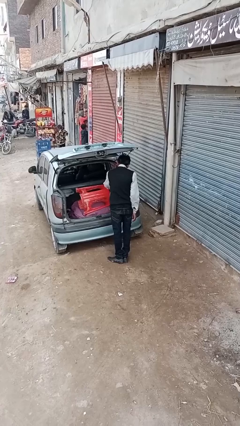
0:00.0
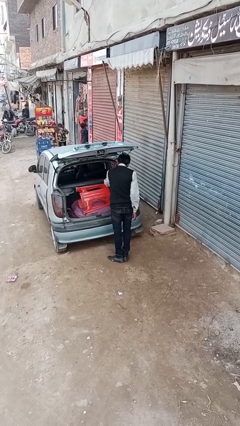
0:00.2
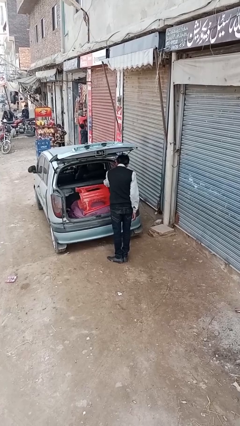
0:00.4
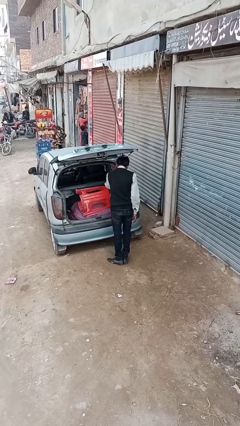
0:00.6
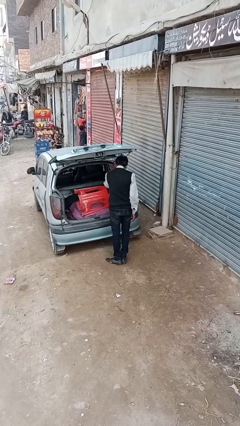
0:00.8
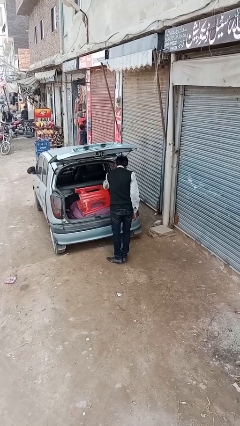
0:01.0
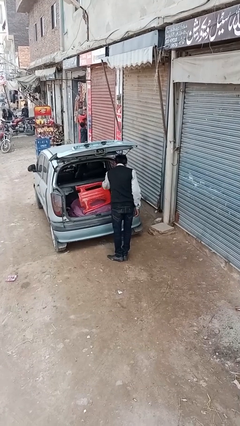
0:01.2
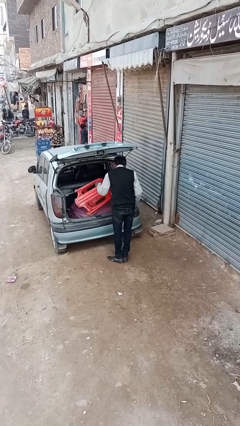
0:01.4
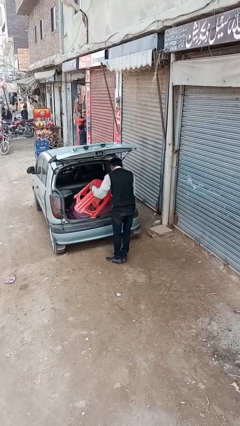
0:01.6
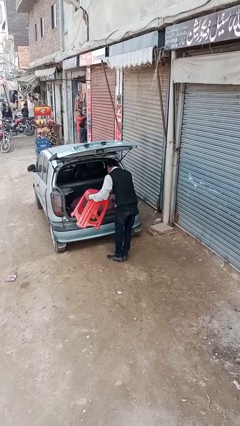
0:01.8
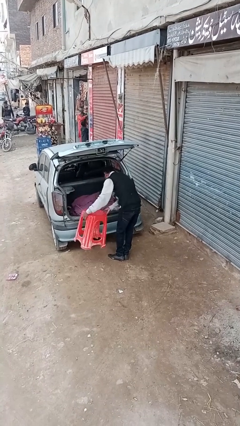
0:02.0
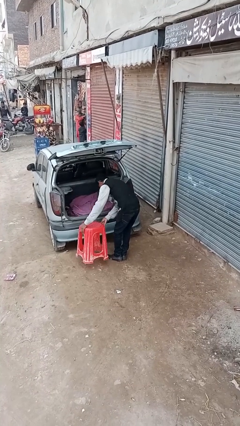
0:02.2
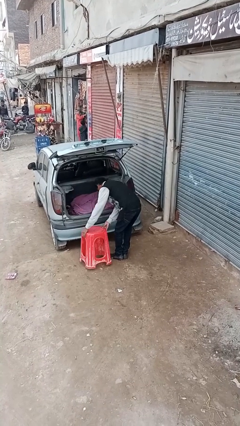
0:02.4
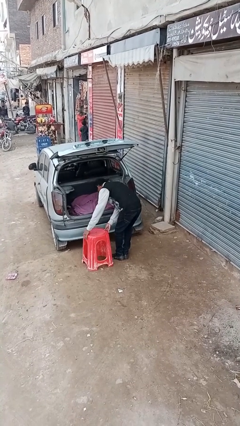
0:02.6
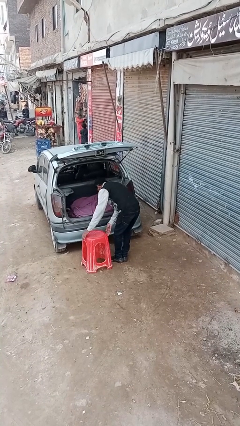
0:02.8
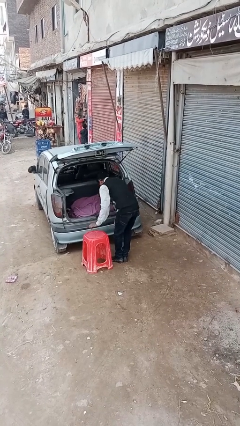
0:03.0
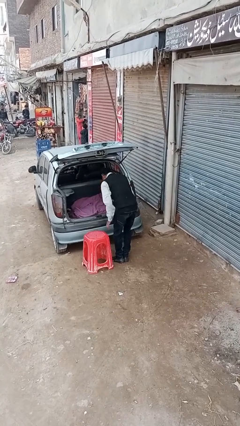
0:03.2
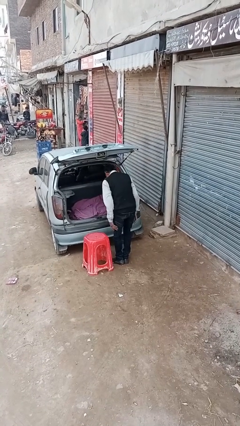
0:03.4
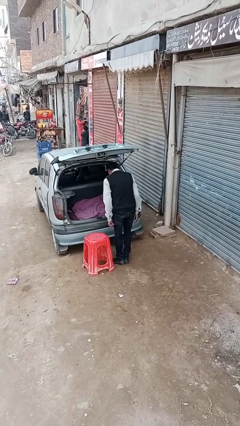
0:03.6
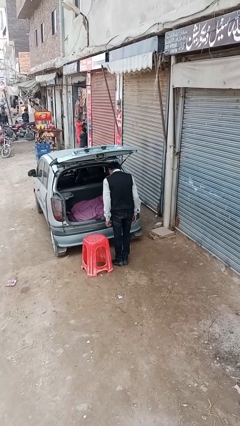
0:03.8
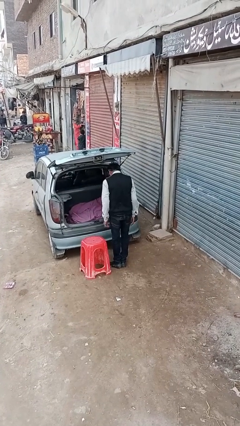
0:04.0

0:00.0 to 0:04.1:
person unloads car

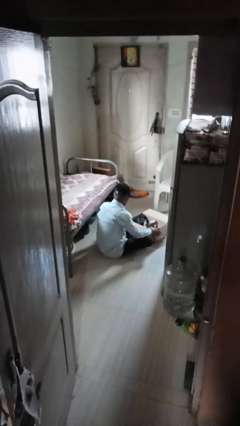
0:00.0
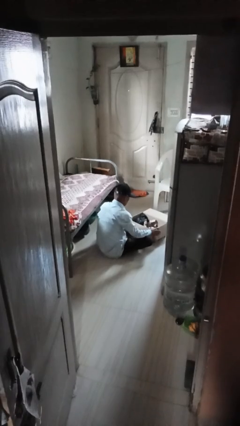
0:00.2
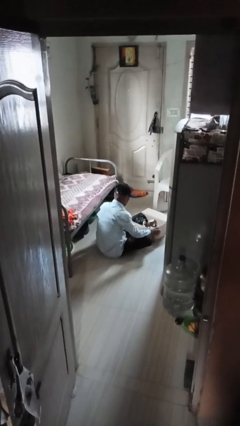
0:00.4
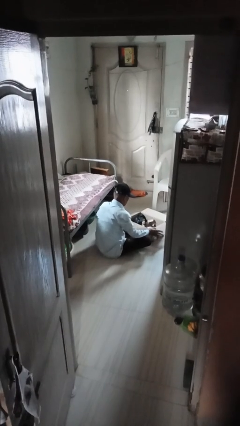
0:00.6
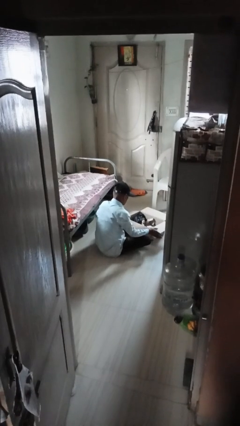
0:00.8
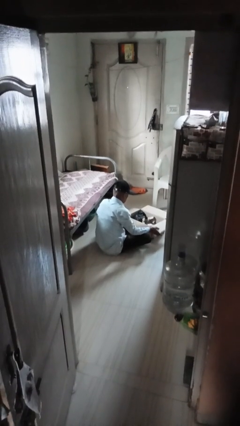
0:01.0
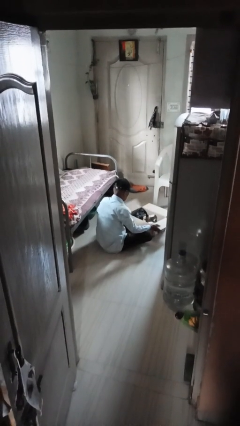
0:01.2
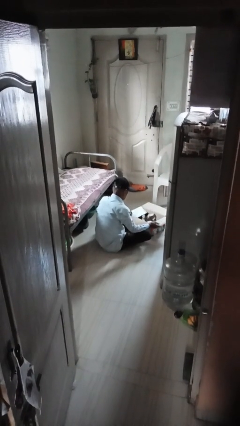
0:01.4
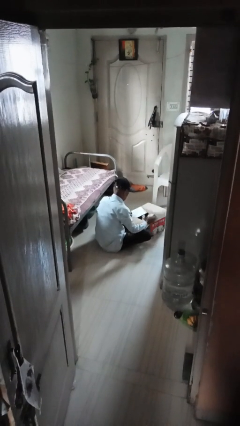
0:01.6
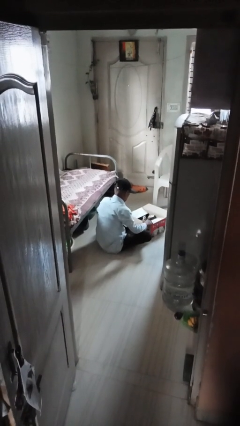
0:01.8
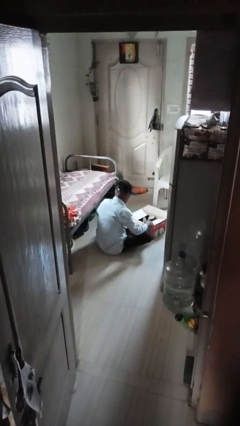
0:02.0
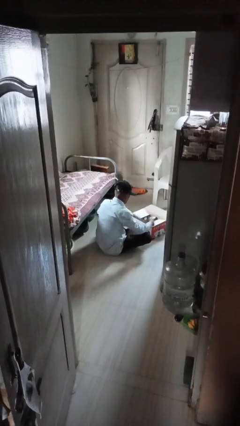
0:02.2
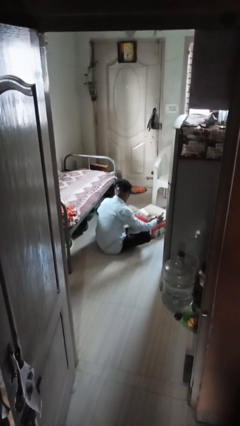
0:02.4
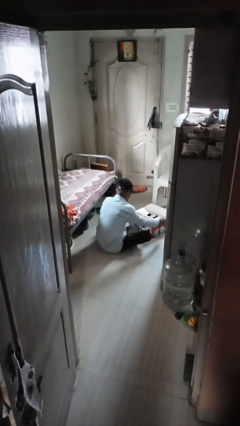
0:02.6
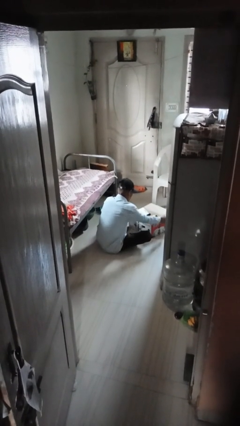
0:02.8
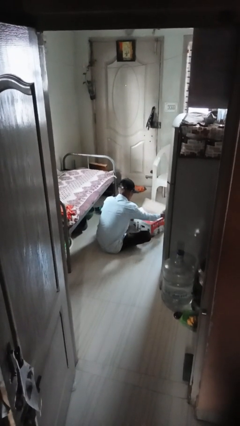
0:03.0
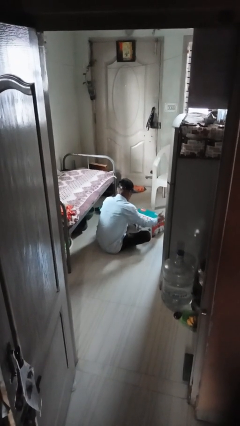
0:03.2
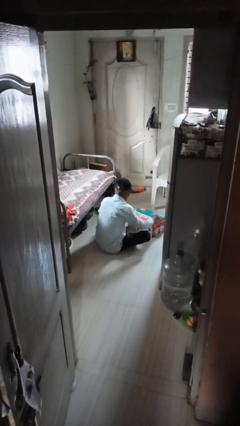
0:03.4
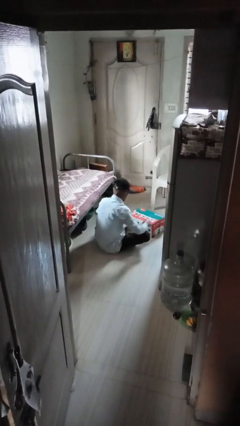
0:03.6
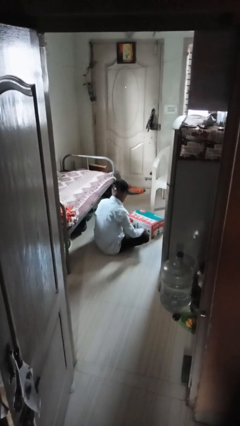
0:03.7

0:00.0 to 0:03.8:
person closes box

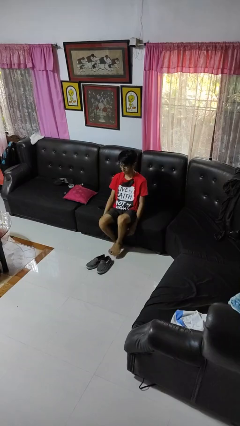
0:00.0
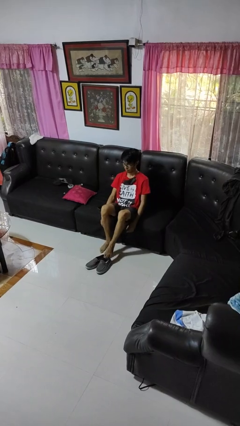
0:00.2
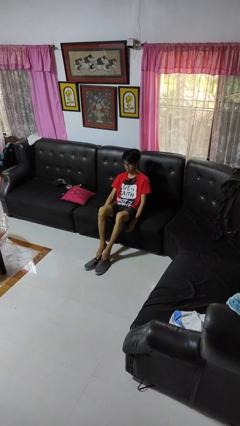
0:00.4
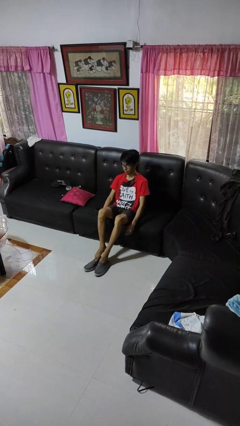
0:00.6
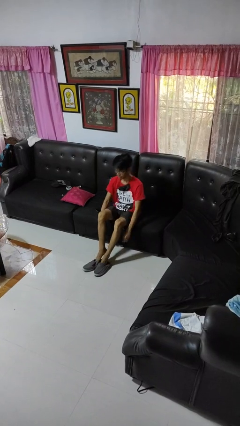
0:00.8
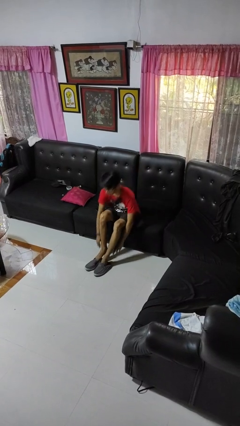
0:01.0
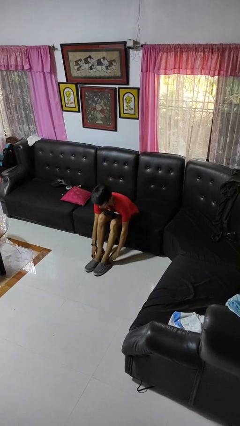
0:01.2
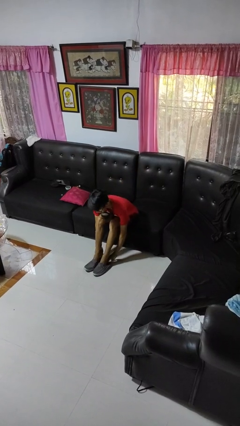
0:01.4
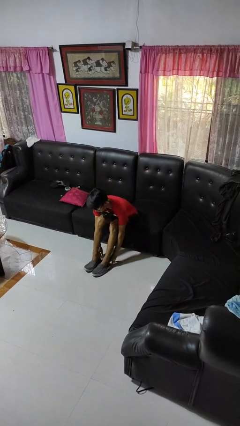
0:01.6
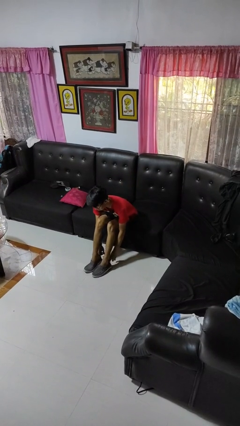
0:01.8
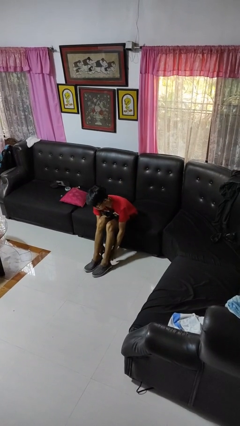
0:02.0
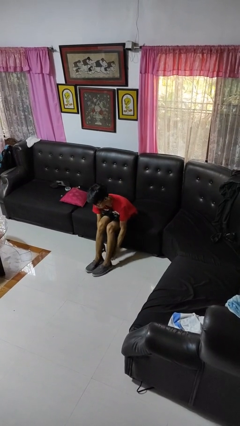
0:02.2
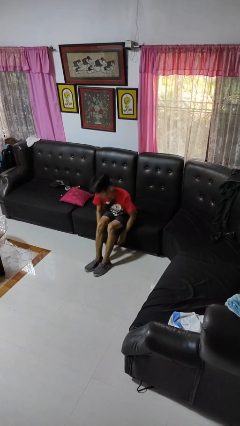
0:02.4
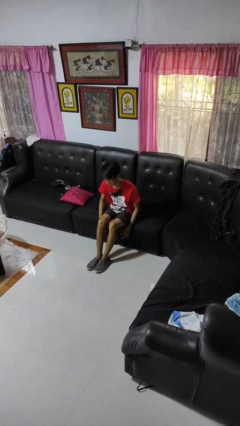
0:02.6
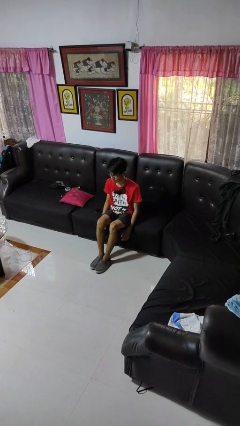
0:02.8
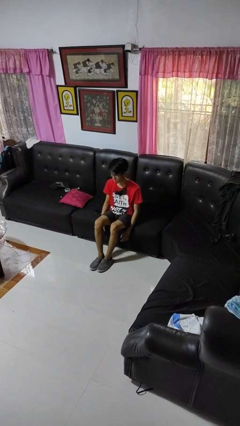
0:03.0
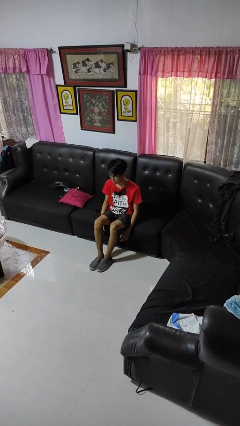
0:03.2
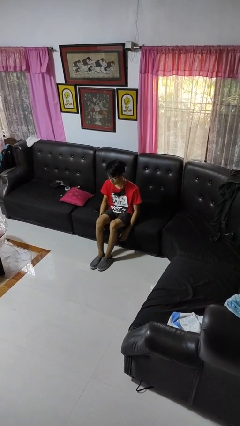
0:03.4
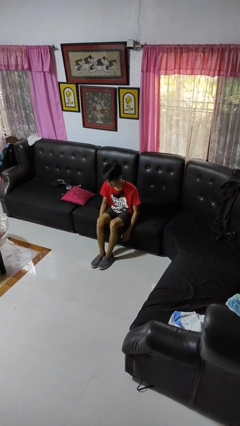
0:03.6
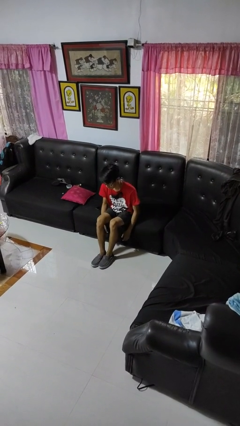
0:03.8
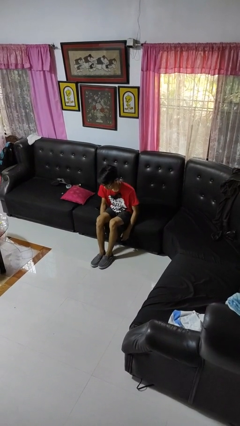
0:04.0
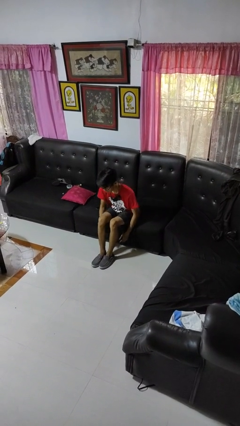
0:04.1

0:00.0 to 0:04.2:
person puts on shoes

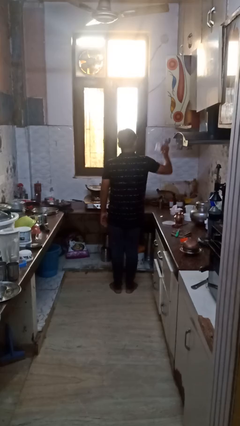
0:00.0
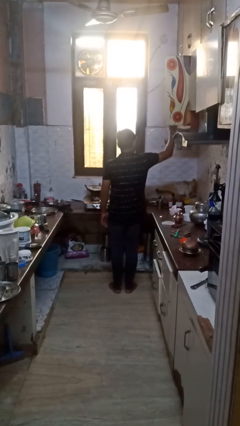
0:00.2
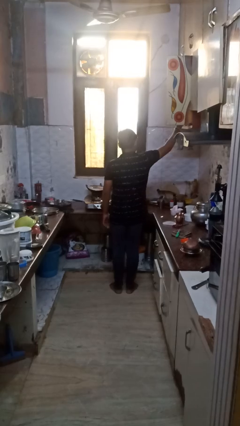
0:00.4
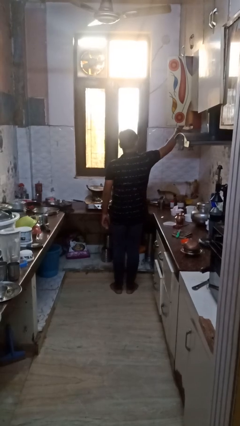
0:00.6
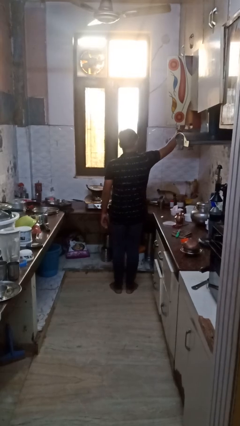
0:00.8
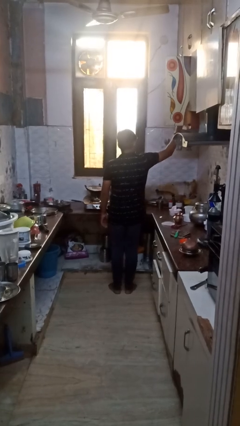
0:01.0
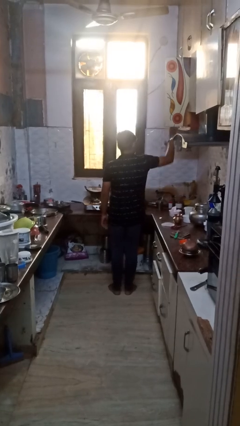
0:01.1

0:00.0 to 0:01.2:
person takes object from cabinet

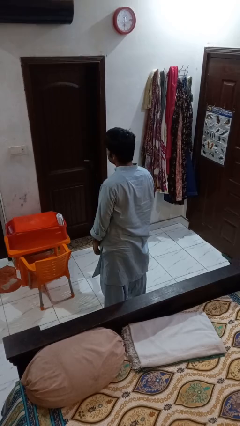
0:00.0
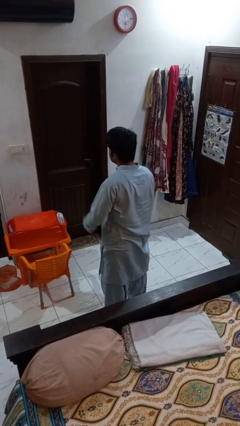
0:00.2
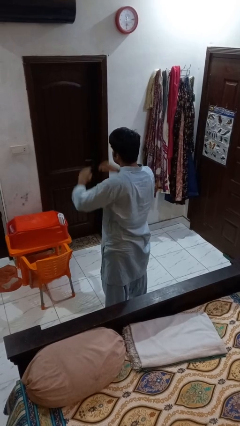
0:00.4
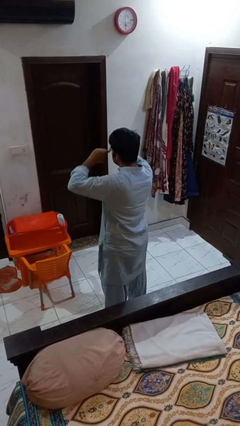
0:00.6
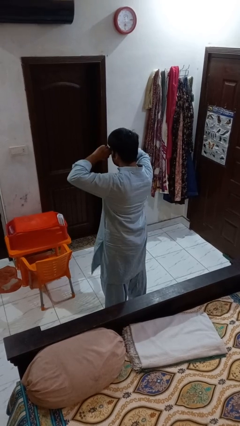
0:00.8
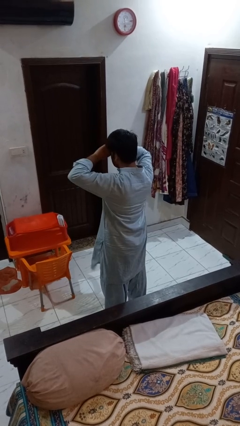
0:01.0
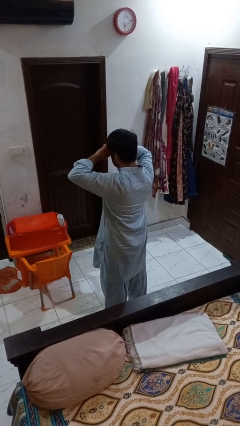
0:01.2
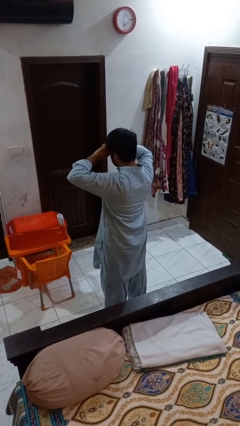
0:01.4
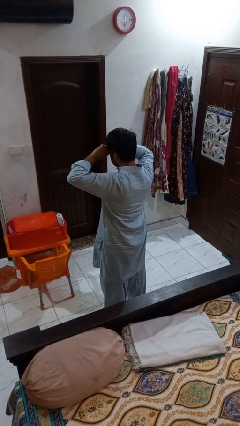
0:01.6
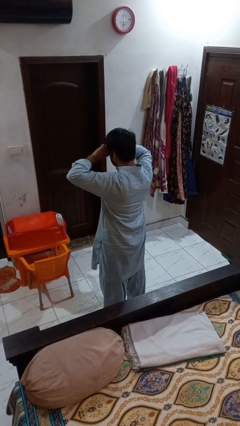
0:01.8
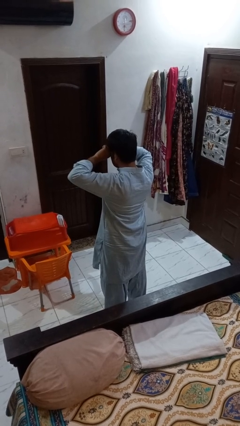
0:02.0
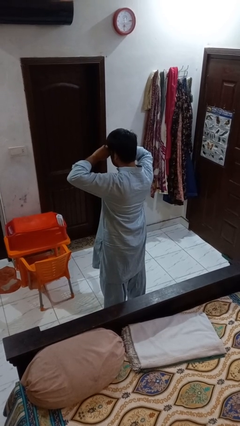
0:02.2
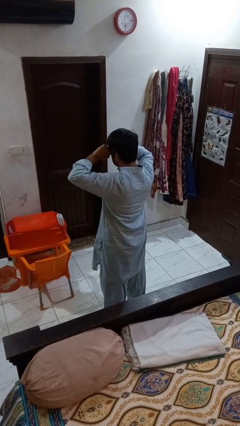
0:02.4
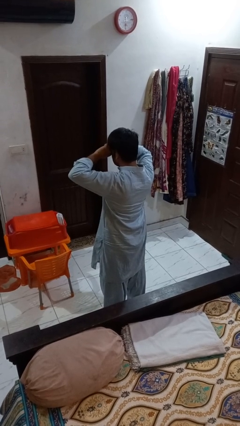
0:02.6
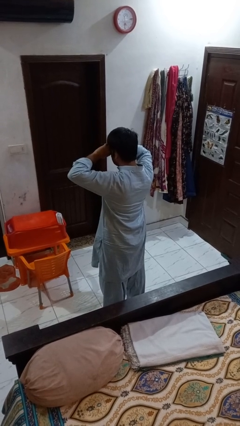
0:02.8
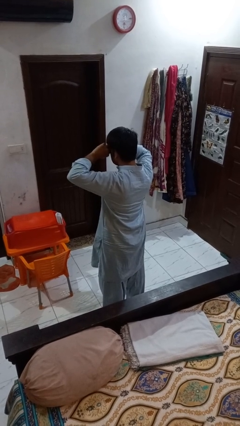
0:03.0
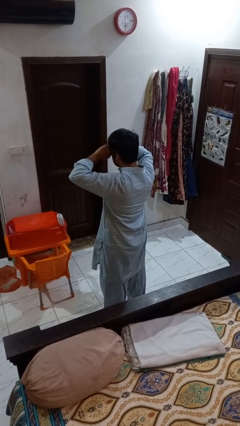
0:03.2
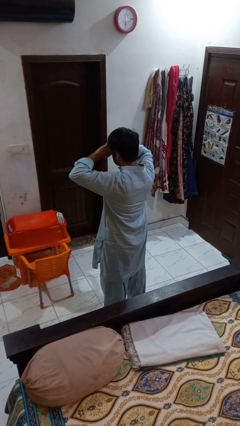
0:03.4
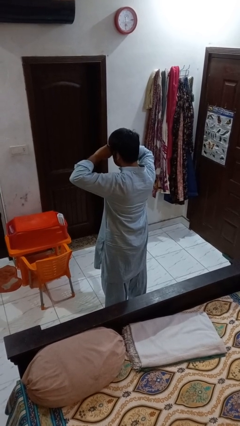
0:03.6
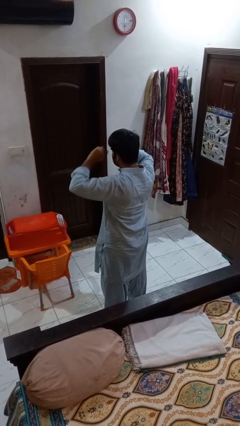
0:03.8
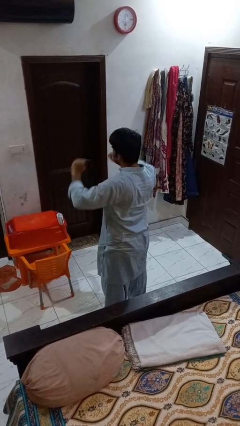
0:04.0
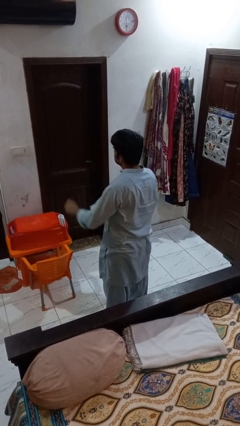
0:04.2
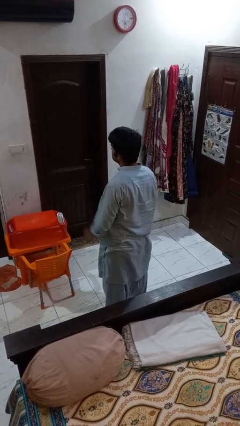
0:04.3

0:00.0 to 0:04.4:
person rubs eyes

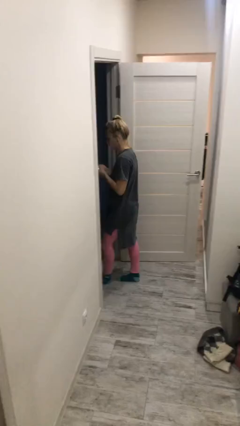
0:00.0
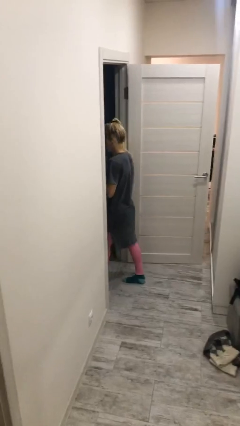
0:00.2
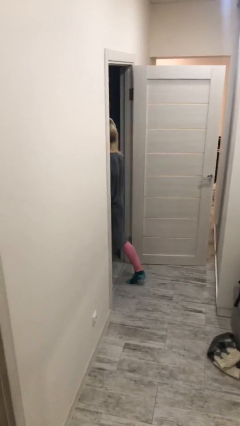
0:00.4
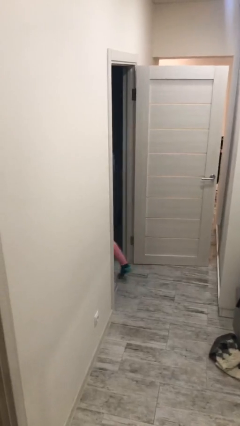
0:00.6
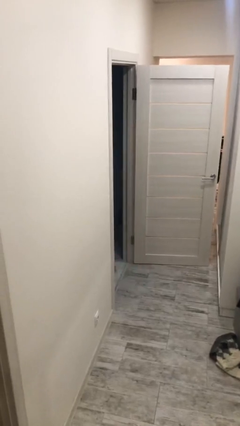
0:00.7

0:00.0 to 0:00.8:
person exits scene through structure
